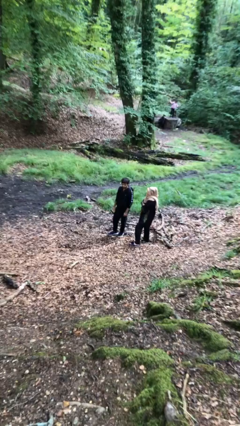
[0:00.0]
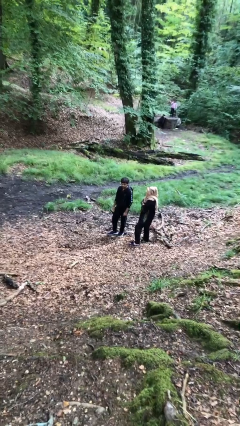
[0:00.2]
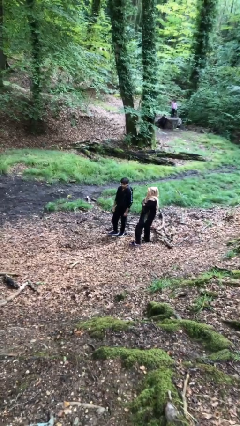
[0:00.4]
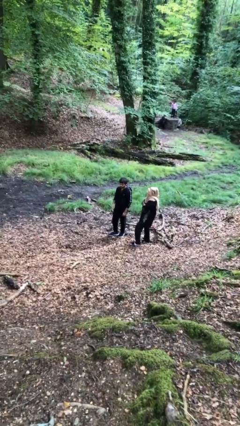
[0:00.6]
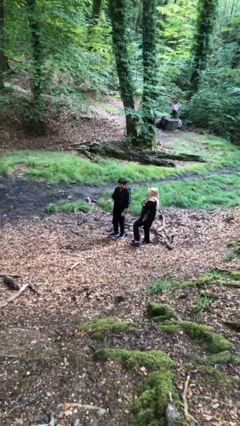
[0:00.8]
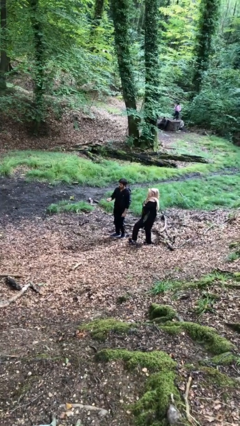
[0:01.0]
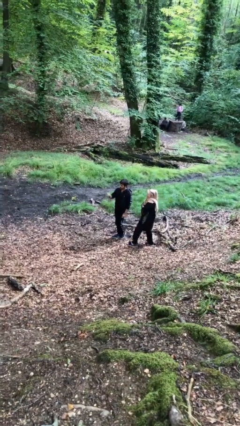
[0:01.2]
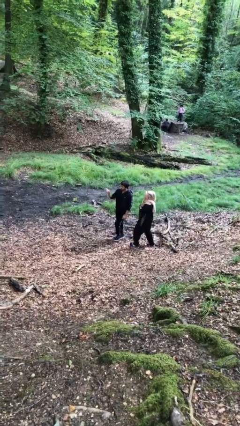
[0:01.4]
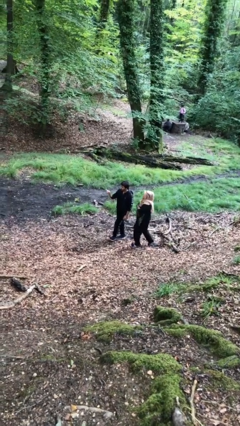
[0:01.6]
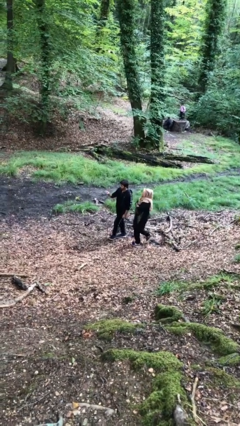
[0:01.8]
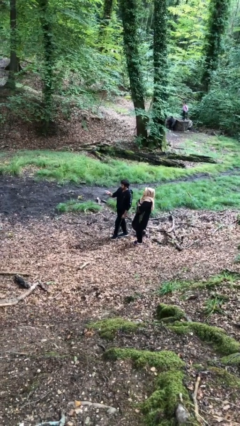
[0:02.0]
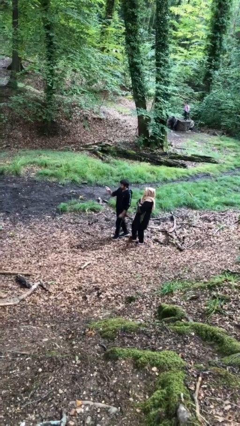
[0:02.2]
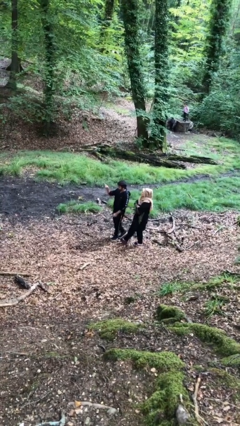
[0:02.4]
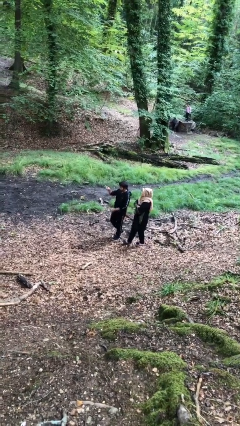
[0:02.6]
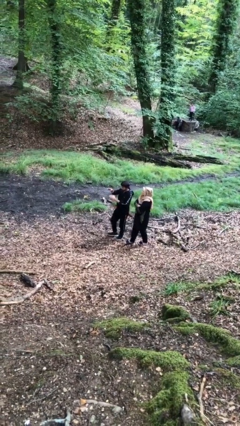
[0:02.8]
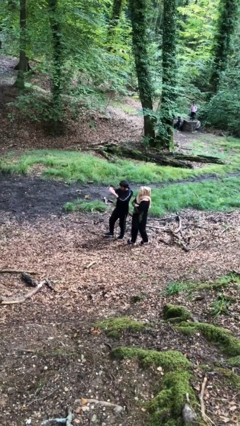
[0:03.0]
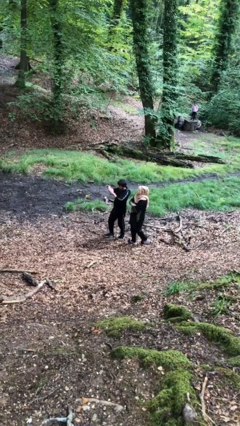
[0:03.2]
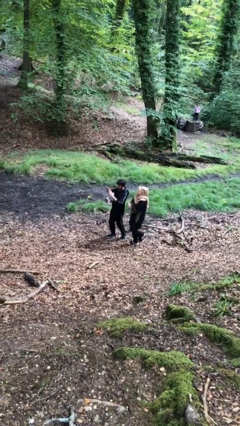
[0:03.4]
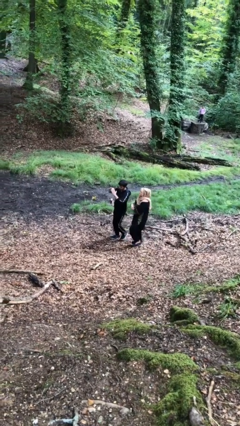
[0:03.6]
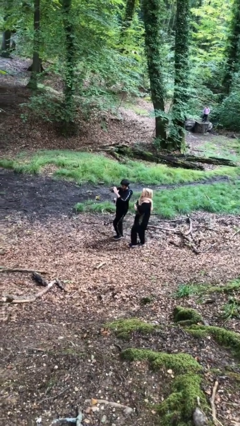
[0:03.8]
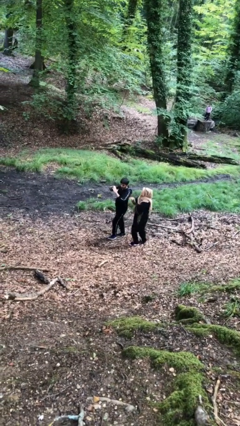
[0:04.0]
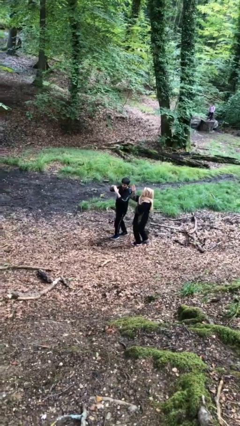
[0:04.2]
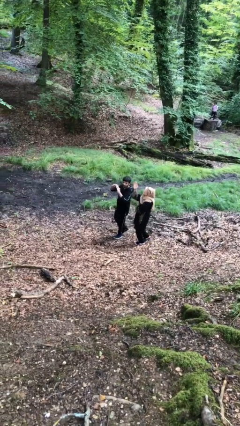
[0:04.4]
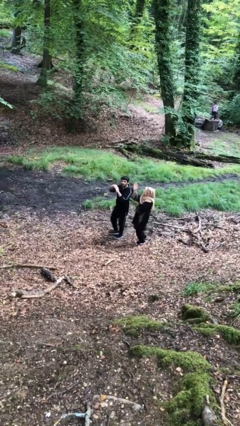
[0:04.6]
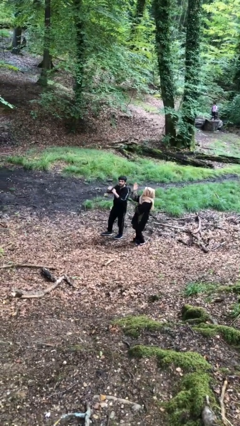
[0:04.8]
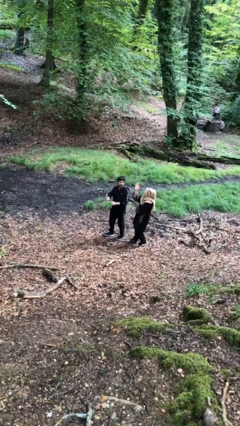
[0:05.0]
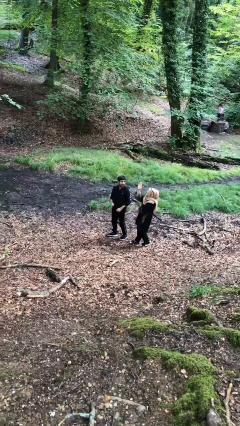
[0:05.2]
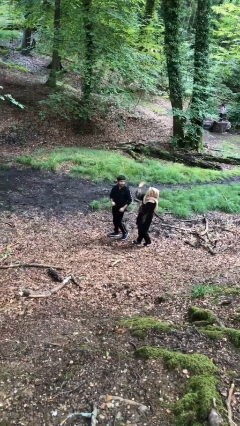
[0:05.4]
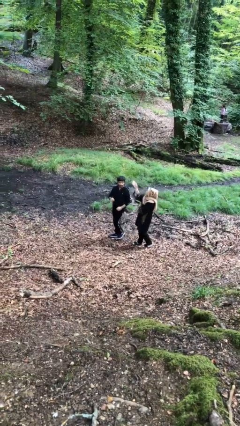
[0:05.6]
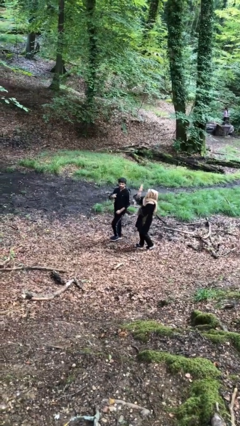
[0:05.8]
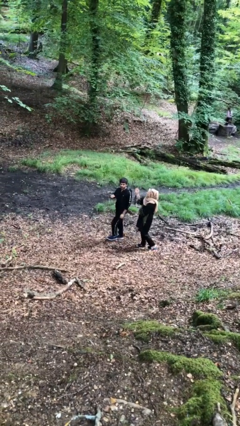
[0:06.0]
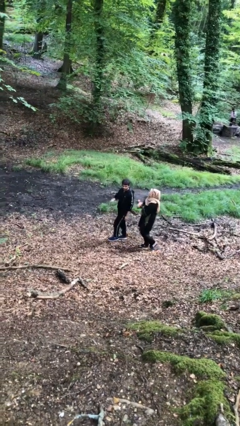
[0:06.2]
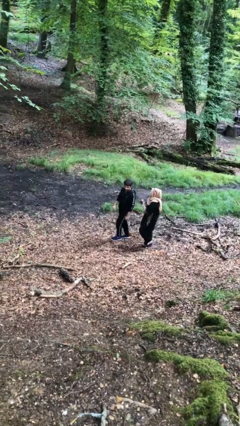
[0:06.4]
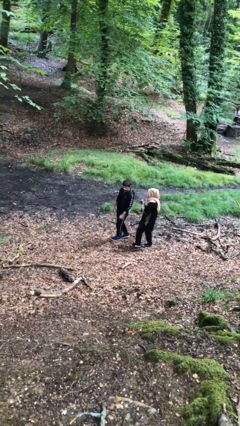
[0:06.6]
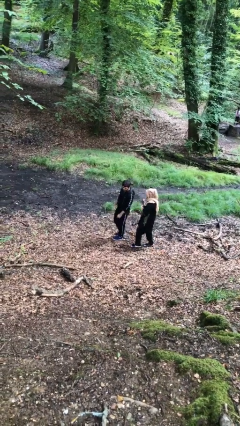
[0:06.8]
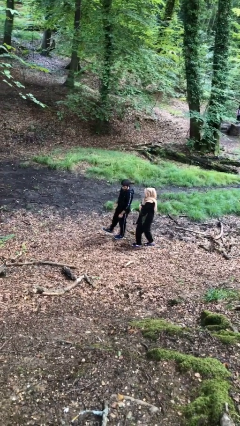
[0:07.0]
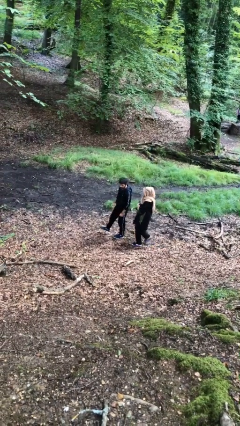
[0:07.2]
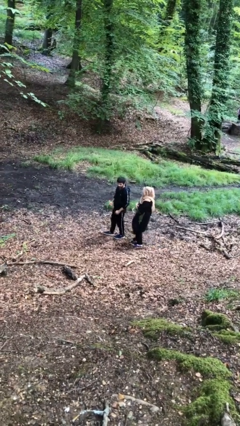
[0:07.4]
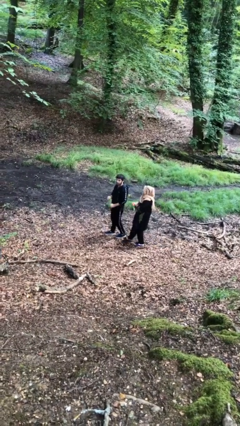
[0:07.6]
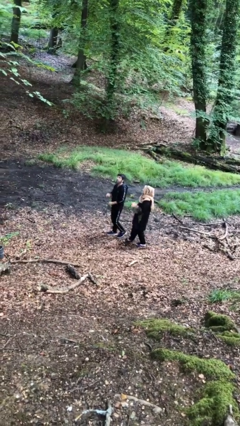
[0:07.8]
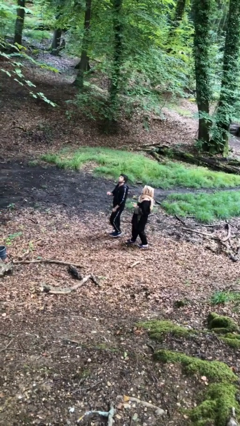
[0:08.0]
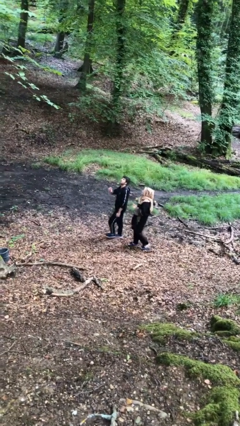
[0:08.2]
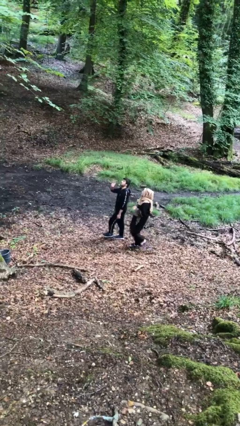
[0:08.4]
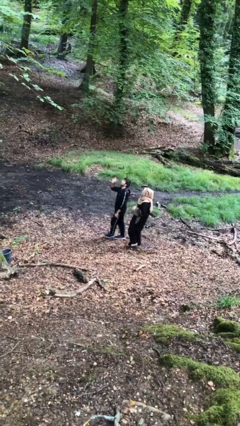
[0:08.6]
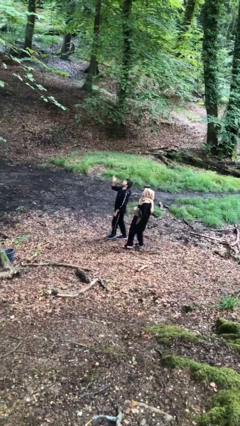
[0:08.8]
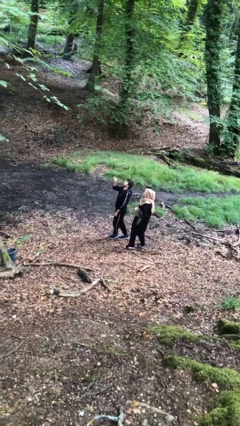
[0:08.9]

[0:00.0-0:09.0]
person talks to person

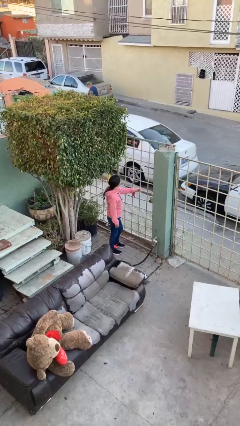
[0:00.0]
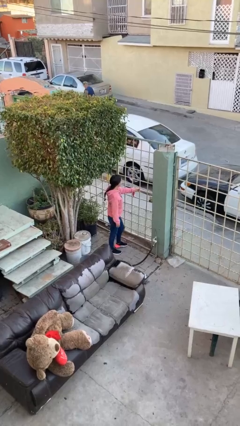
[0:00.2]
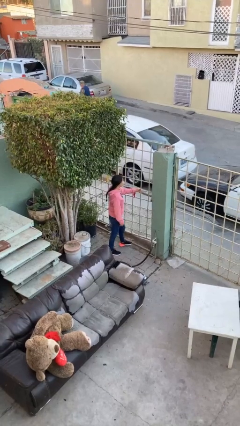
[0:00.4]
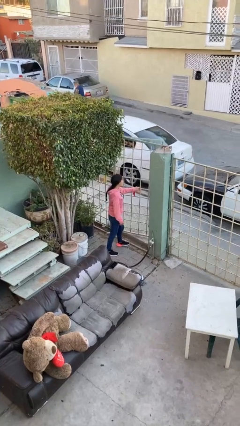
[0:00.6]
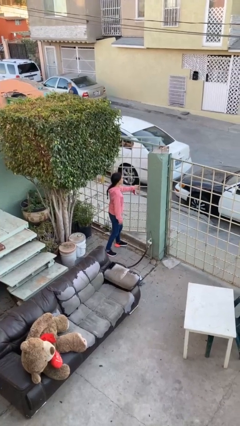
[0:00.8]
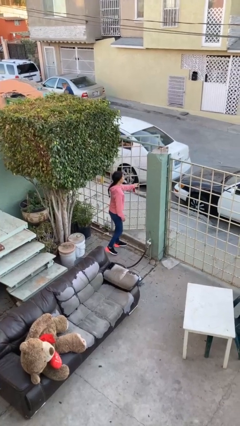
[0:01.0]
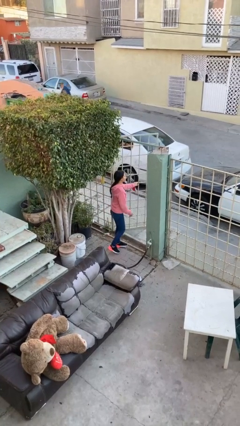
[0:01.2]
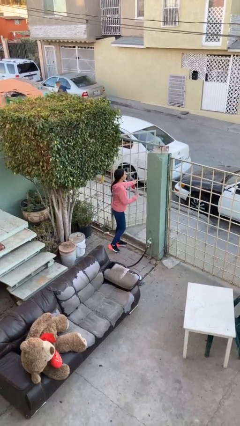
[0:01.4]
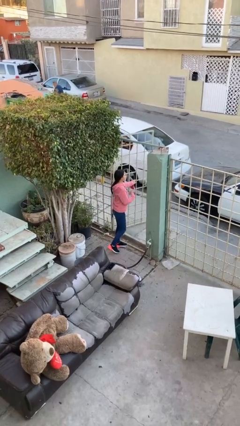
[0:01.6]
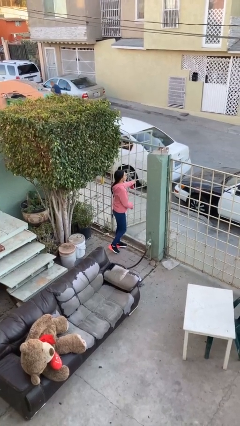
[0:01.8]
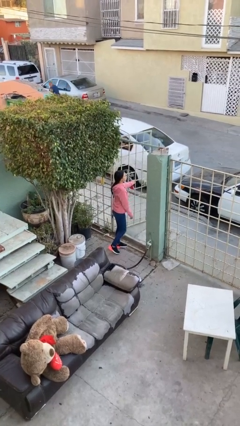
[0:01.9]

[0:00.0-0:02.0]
person opens facility door

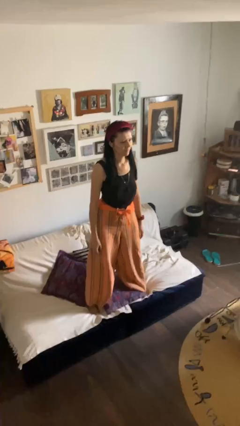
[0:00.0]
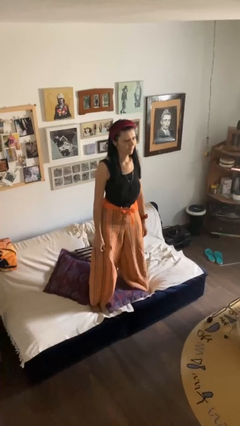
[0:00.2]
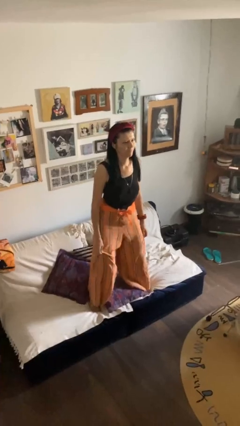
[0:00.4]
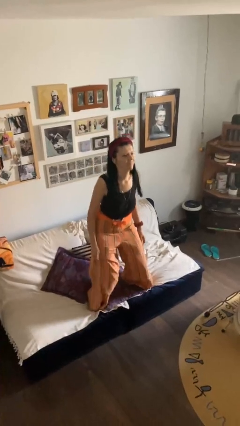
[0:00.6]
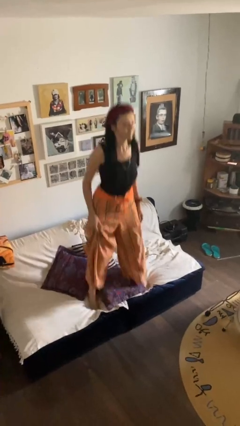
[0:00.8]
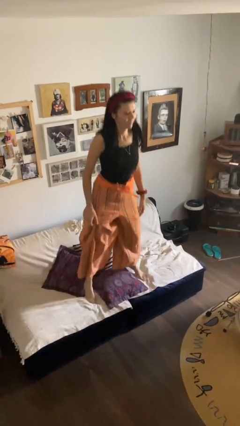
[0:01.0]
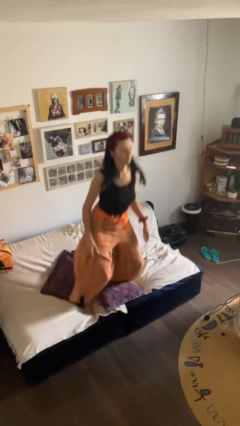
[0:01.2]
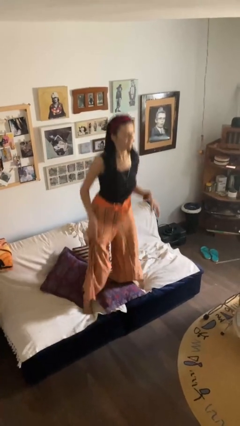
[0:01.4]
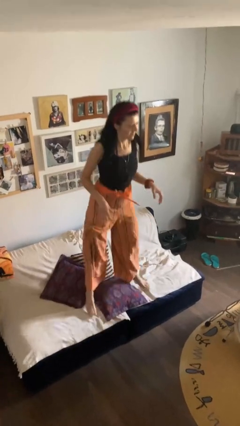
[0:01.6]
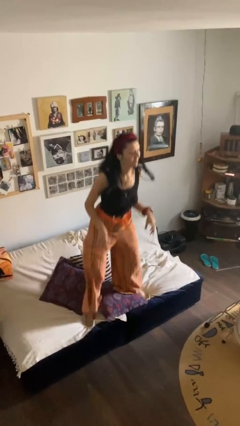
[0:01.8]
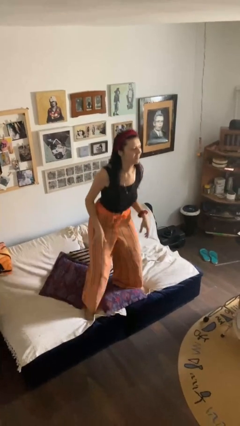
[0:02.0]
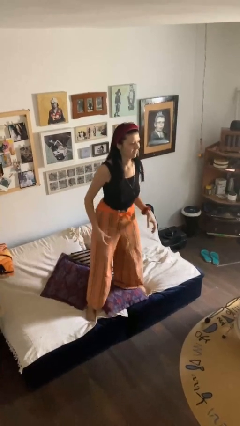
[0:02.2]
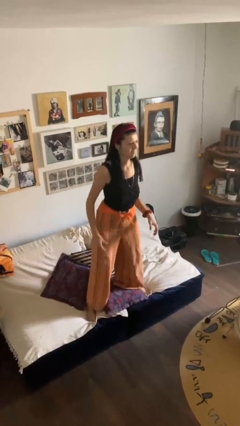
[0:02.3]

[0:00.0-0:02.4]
person jumps on couch

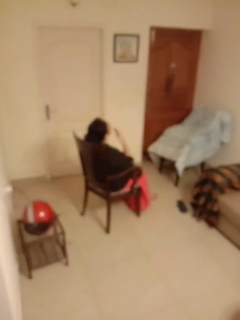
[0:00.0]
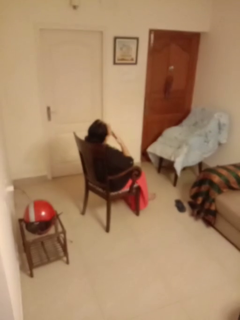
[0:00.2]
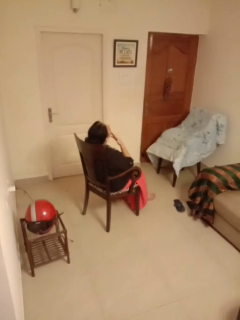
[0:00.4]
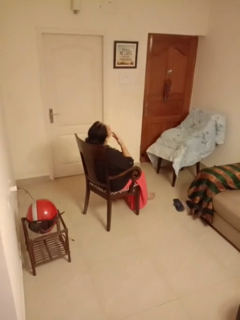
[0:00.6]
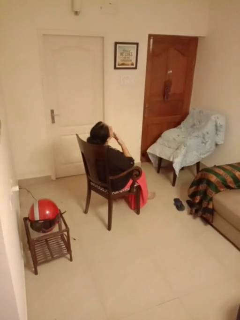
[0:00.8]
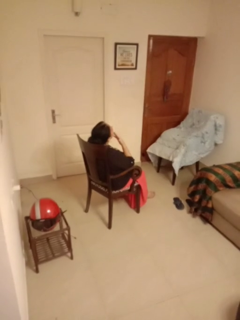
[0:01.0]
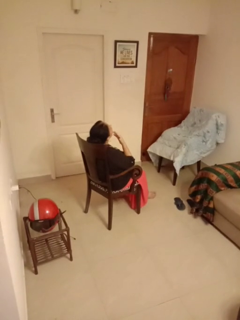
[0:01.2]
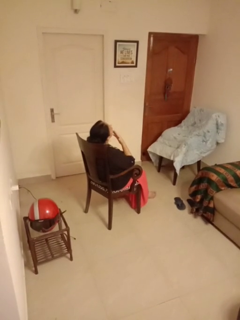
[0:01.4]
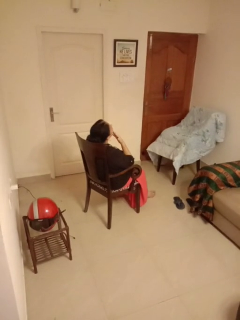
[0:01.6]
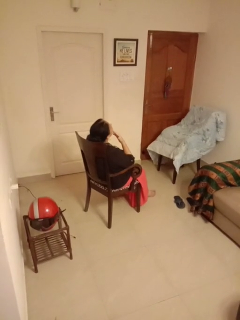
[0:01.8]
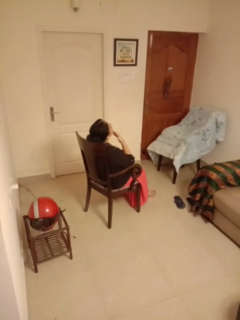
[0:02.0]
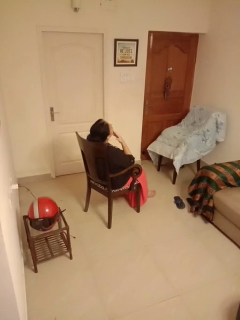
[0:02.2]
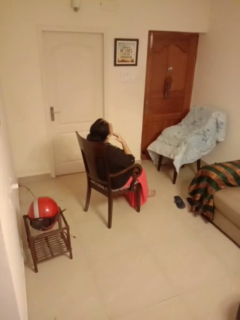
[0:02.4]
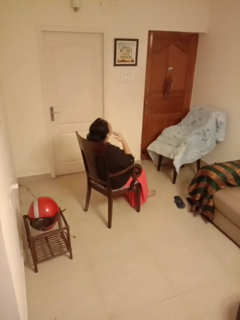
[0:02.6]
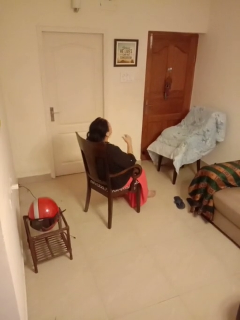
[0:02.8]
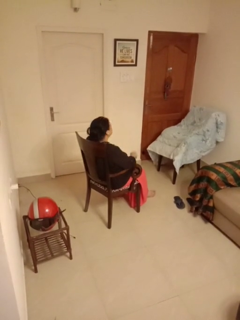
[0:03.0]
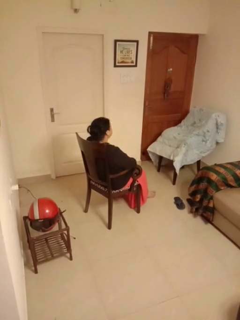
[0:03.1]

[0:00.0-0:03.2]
person strokes chin

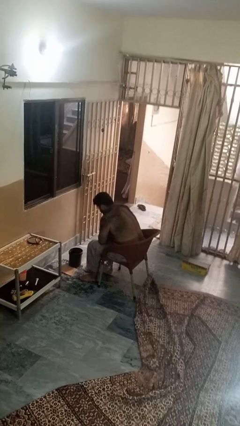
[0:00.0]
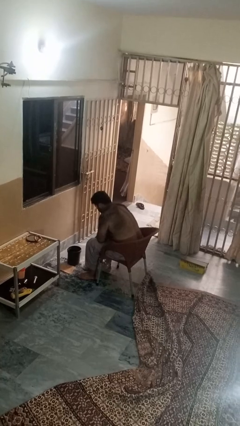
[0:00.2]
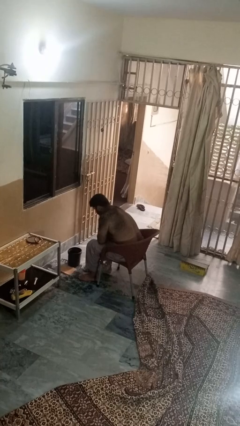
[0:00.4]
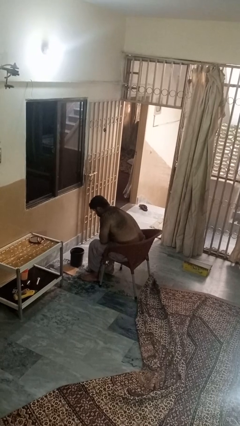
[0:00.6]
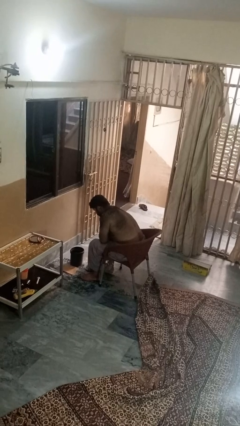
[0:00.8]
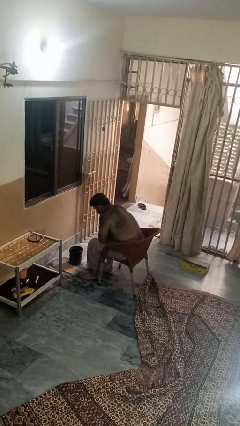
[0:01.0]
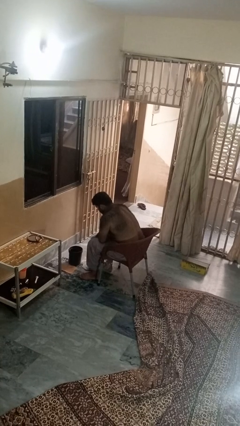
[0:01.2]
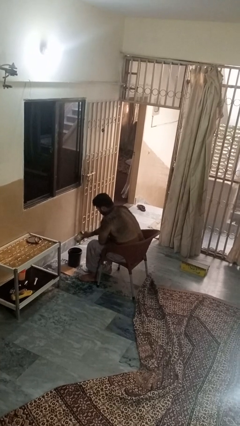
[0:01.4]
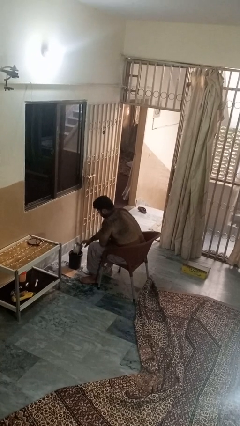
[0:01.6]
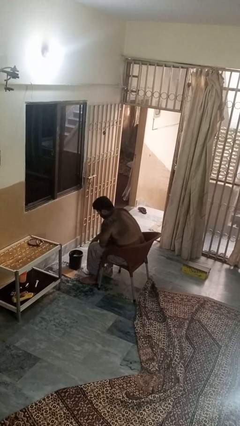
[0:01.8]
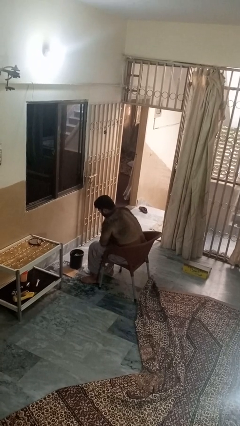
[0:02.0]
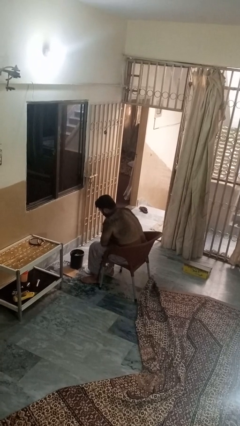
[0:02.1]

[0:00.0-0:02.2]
person discards trash
